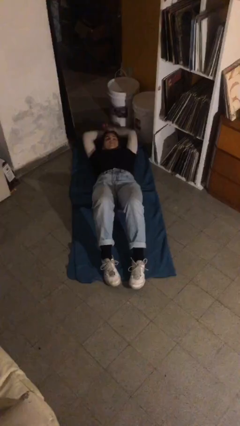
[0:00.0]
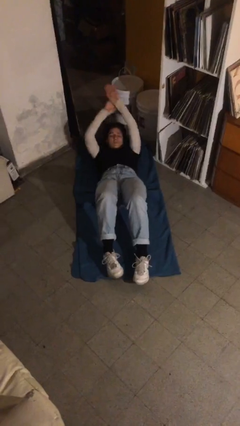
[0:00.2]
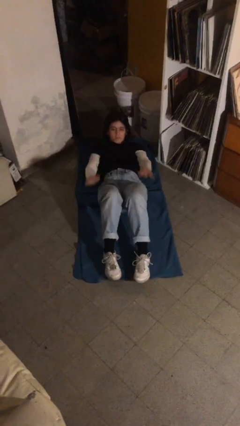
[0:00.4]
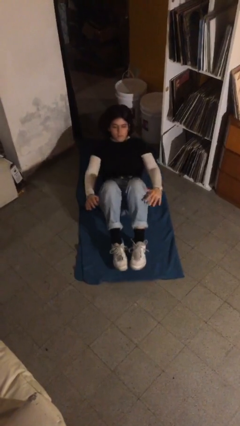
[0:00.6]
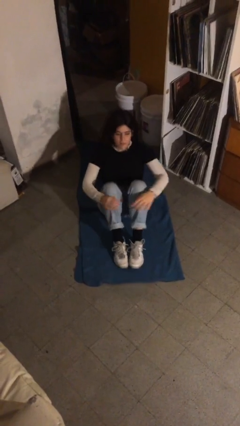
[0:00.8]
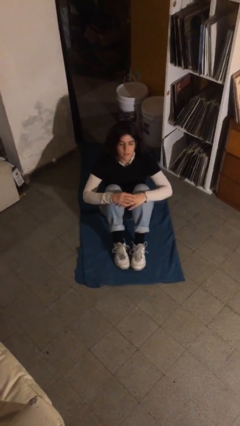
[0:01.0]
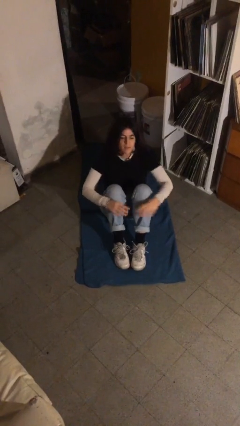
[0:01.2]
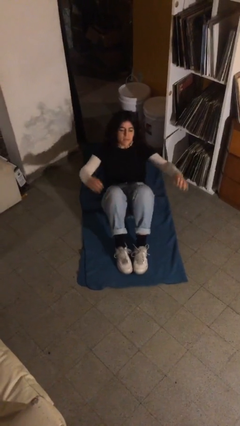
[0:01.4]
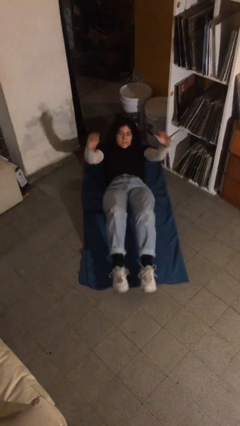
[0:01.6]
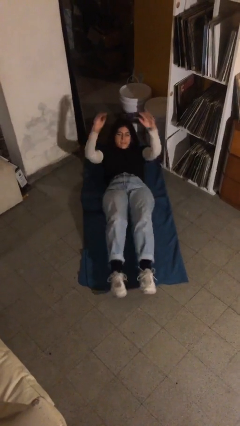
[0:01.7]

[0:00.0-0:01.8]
person exercises with situp

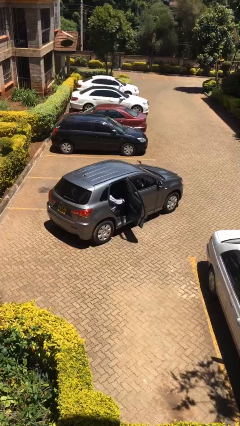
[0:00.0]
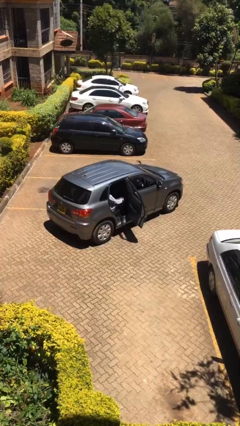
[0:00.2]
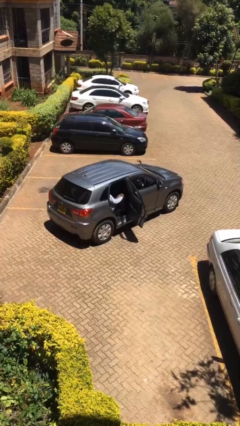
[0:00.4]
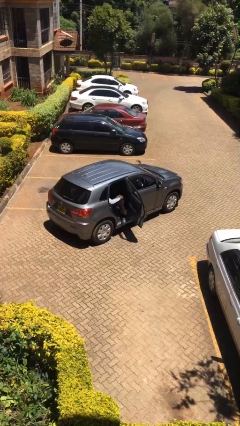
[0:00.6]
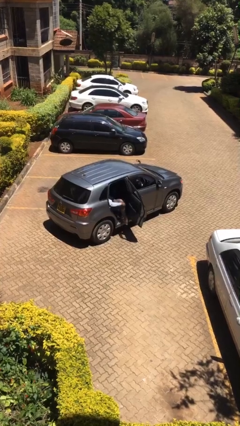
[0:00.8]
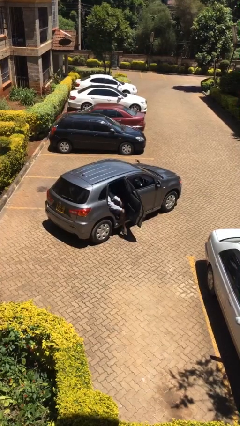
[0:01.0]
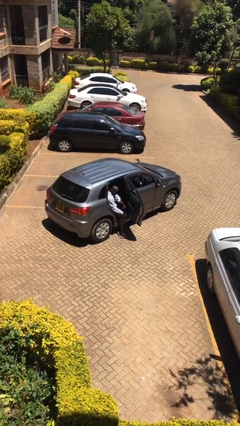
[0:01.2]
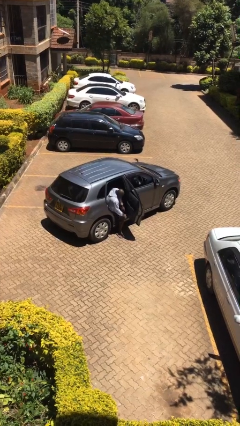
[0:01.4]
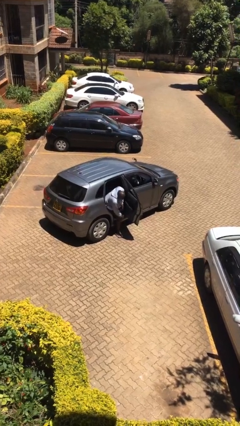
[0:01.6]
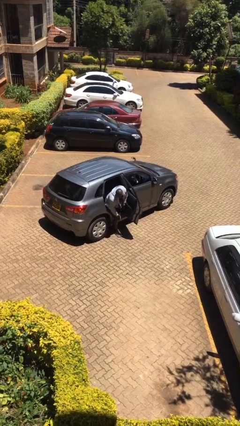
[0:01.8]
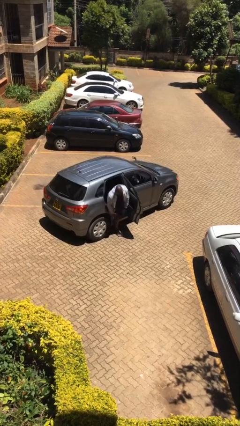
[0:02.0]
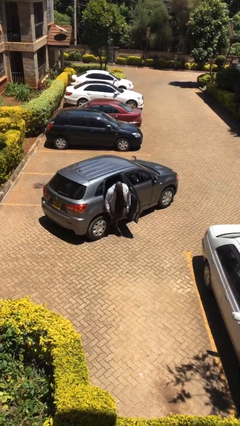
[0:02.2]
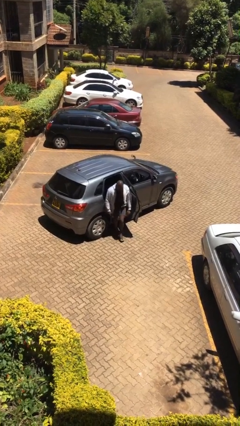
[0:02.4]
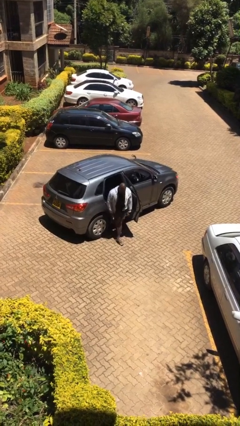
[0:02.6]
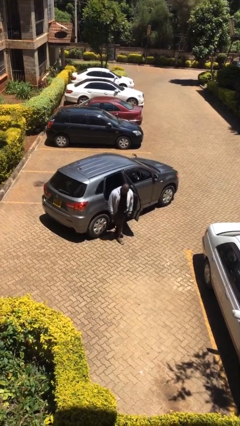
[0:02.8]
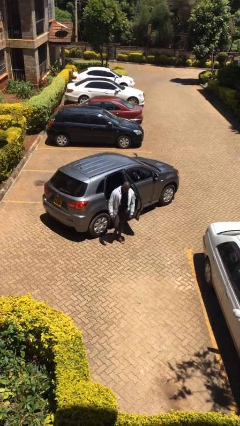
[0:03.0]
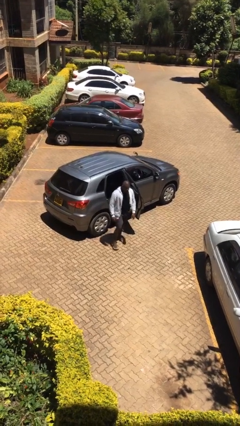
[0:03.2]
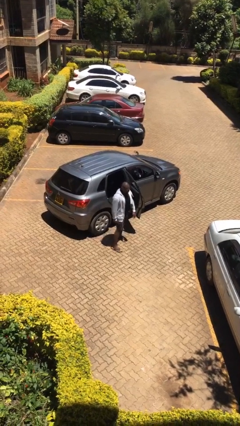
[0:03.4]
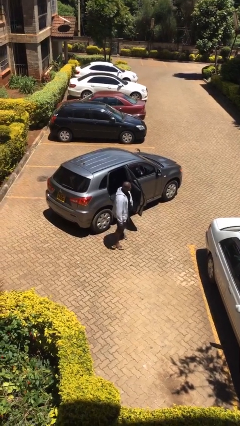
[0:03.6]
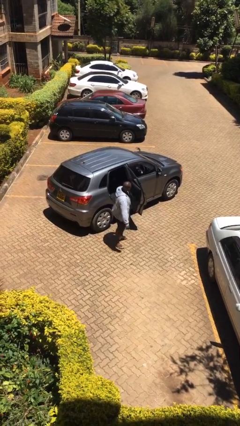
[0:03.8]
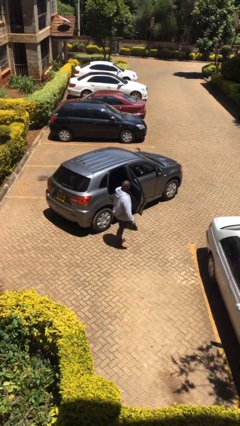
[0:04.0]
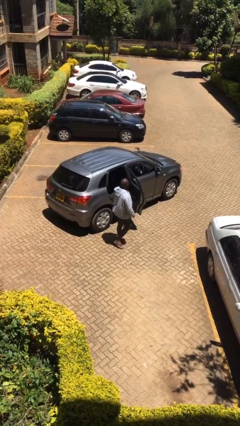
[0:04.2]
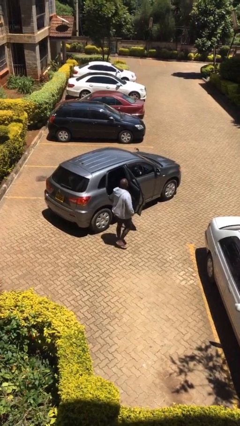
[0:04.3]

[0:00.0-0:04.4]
person exits car

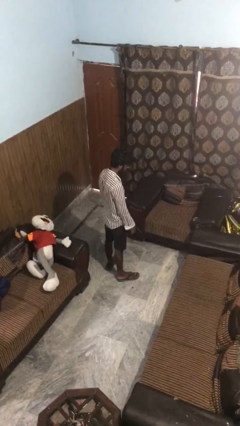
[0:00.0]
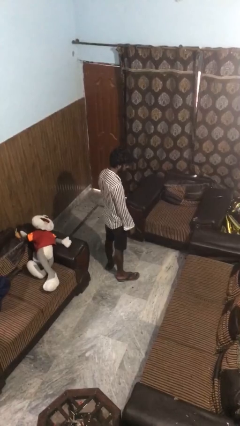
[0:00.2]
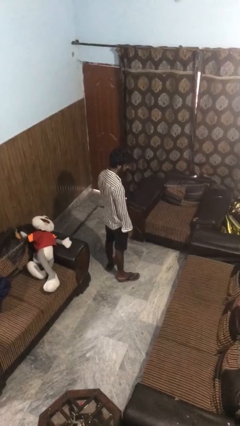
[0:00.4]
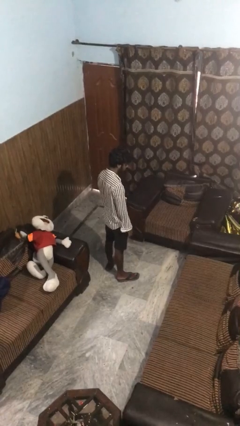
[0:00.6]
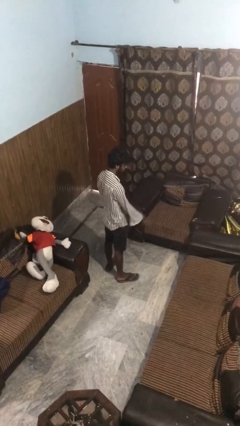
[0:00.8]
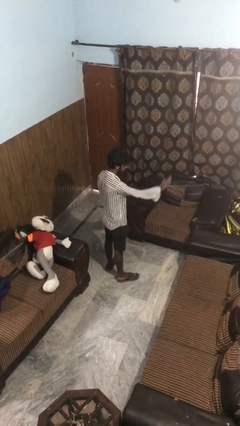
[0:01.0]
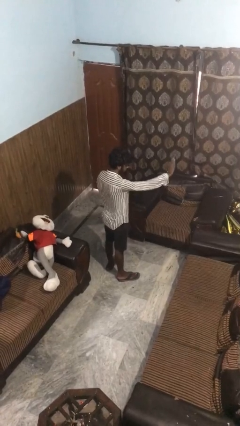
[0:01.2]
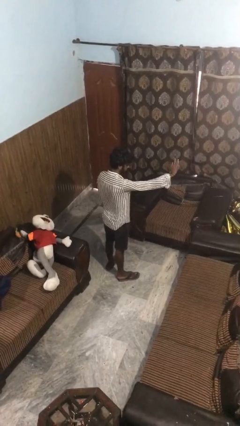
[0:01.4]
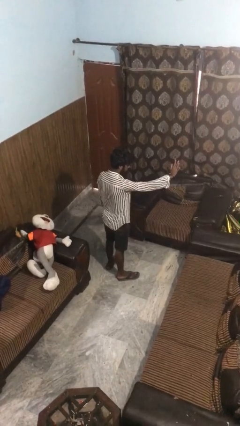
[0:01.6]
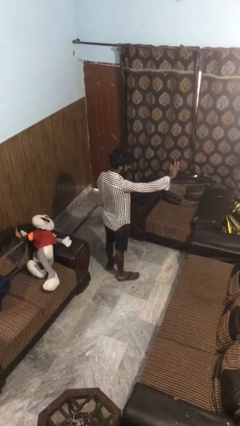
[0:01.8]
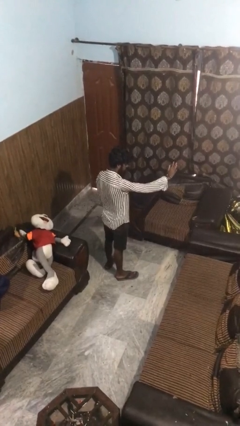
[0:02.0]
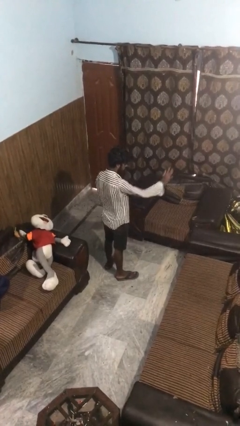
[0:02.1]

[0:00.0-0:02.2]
person gestures stop

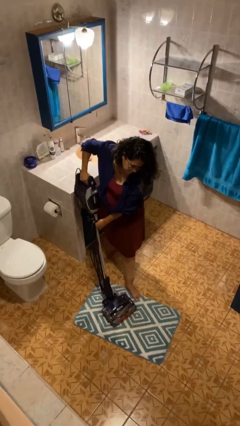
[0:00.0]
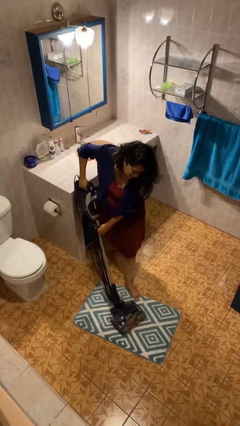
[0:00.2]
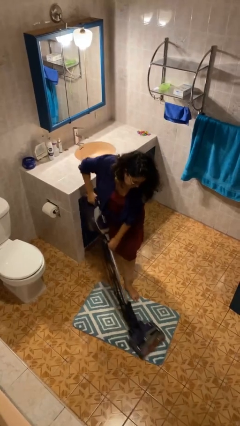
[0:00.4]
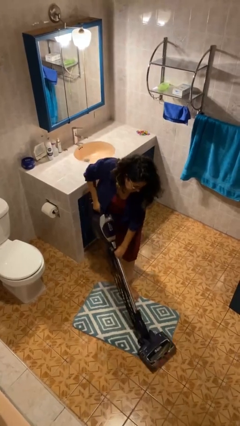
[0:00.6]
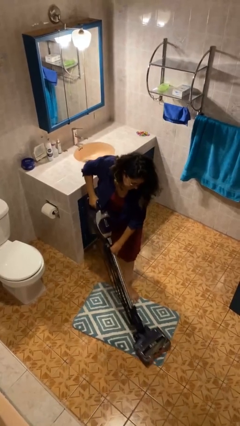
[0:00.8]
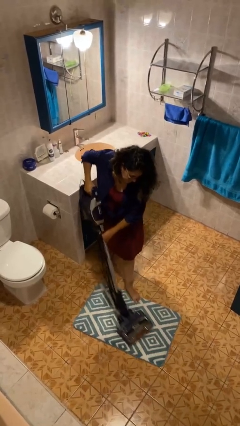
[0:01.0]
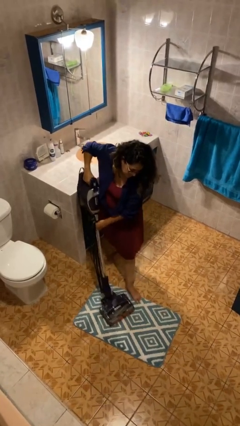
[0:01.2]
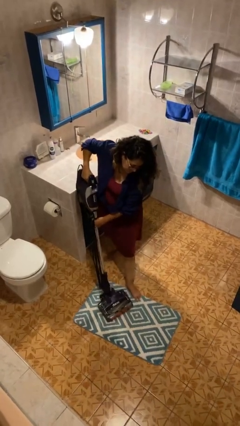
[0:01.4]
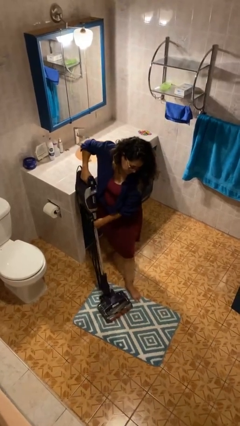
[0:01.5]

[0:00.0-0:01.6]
person vacuums carpet

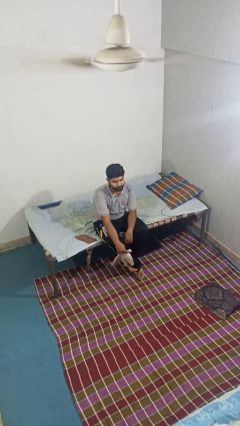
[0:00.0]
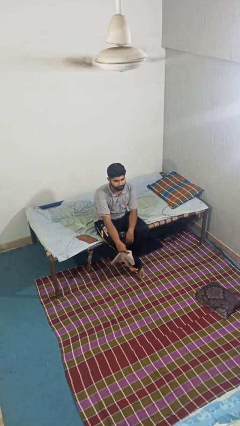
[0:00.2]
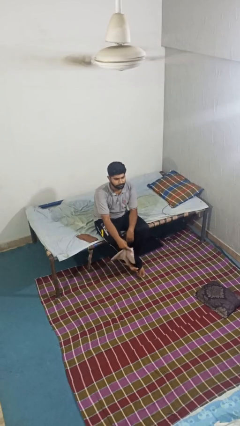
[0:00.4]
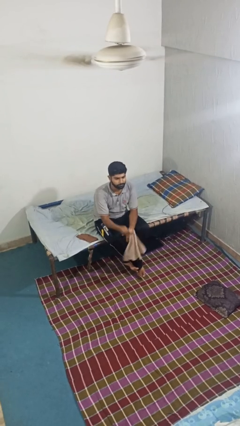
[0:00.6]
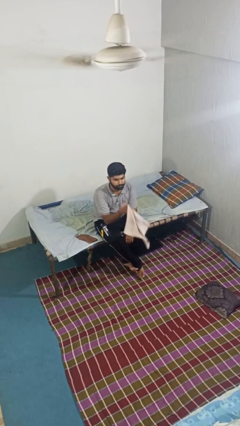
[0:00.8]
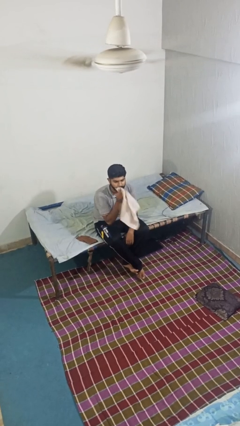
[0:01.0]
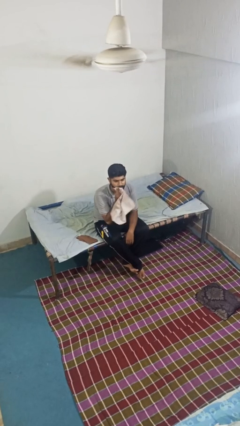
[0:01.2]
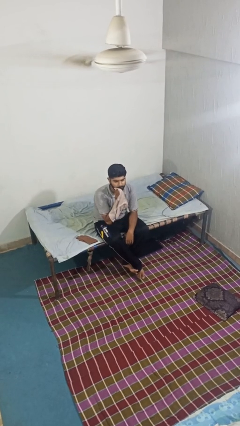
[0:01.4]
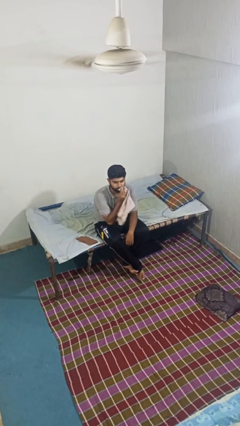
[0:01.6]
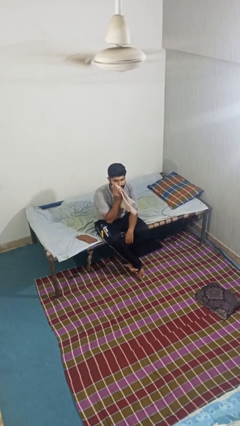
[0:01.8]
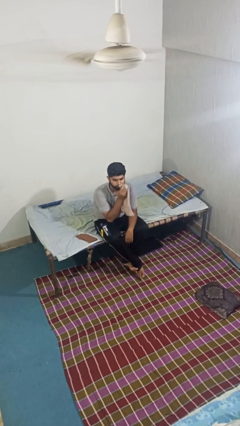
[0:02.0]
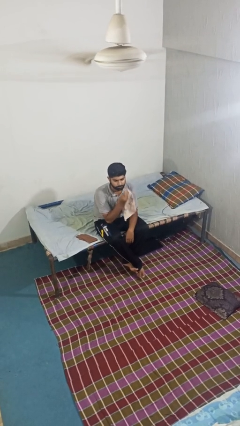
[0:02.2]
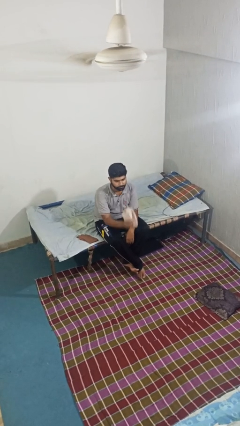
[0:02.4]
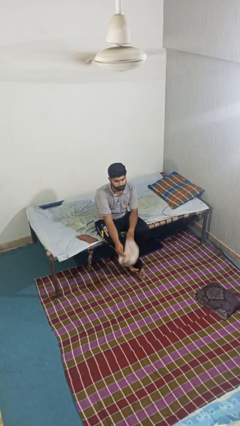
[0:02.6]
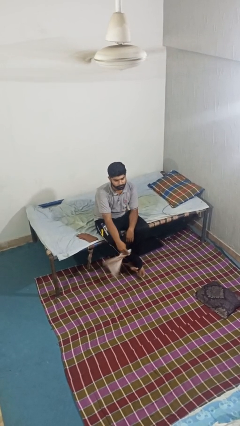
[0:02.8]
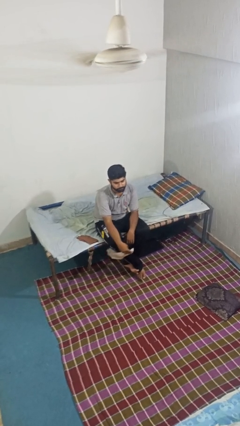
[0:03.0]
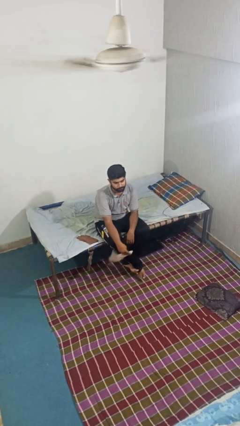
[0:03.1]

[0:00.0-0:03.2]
person wipes mouth with napkin

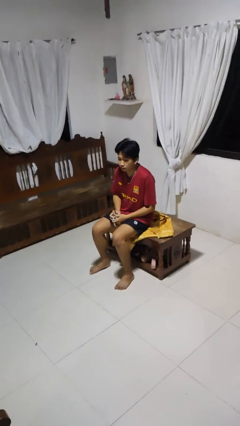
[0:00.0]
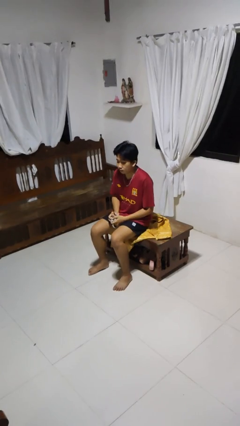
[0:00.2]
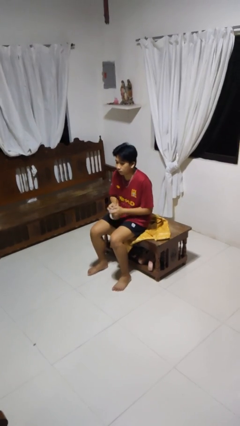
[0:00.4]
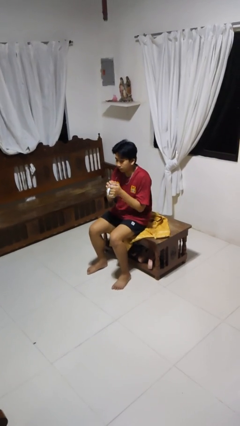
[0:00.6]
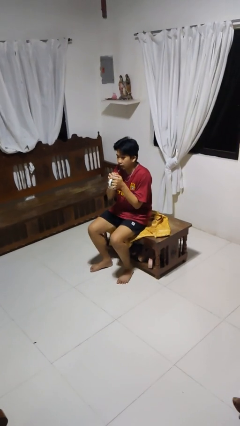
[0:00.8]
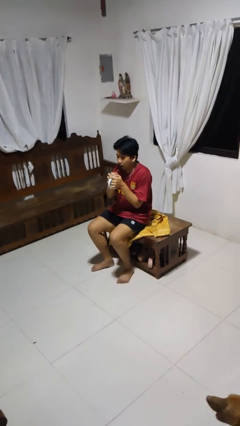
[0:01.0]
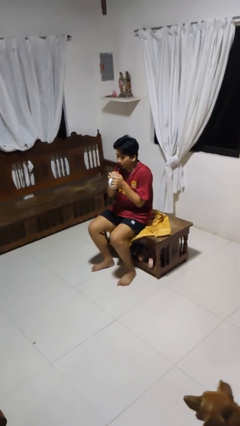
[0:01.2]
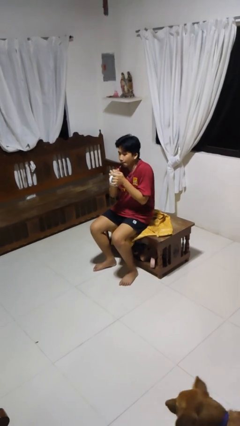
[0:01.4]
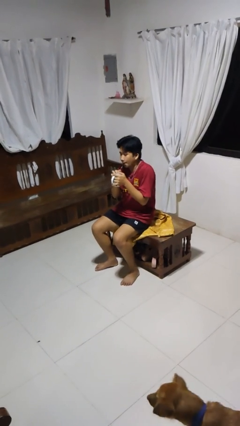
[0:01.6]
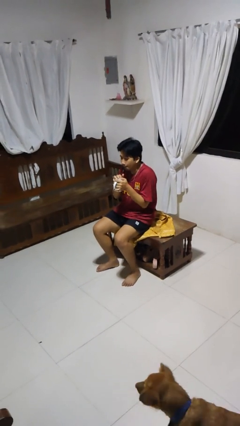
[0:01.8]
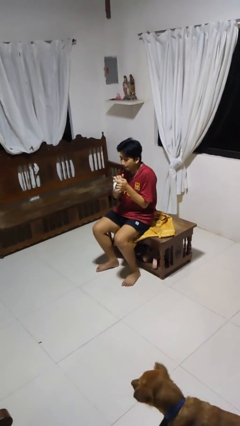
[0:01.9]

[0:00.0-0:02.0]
person drinks from straw

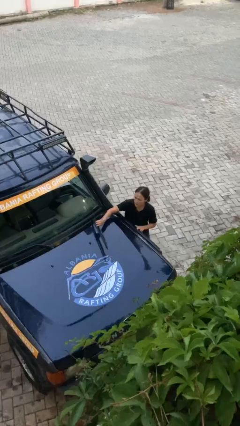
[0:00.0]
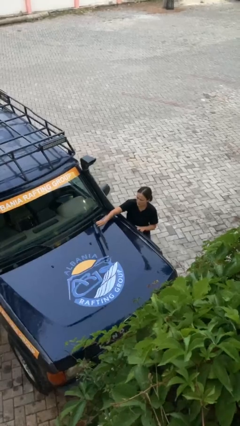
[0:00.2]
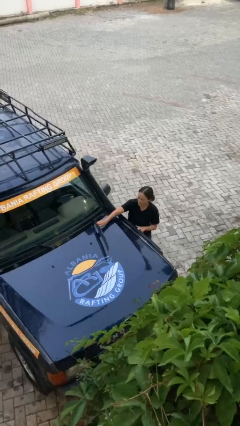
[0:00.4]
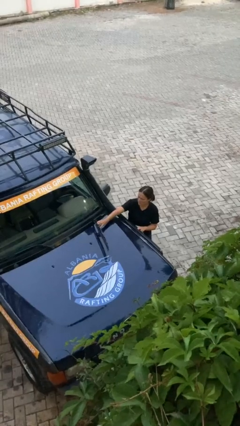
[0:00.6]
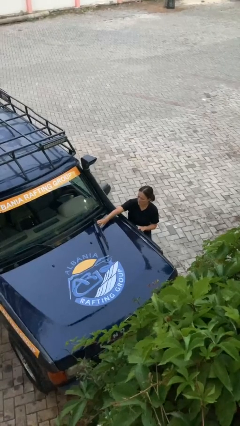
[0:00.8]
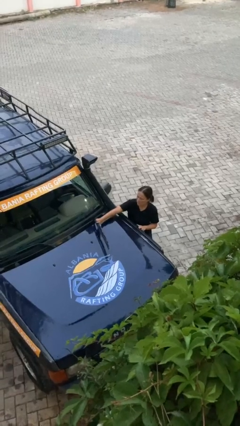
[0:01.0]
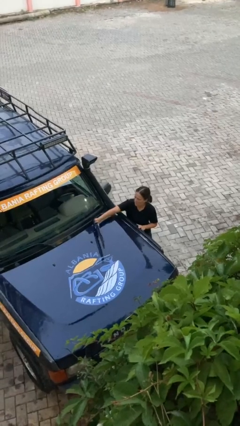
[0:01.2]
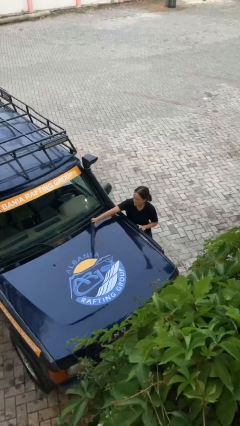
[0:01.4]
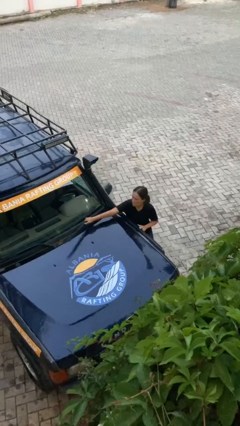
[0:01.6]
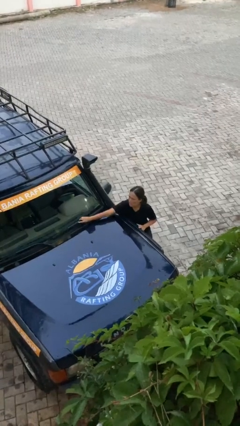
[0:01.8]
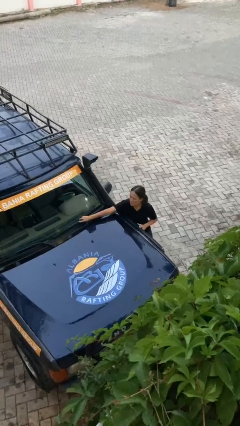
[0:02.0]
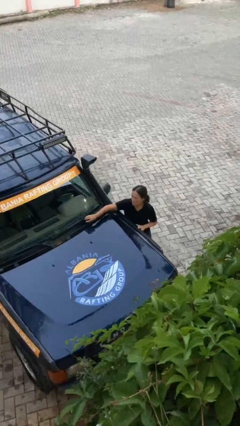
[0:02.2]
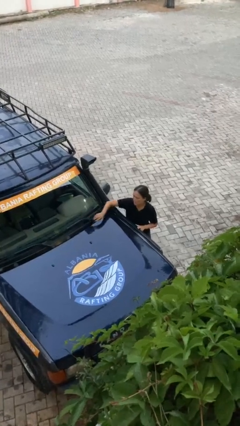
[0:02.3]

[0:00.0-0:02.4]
person flips down car wipers
